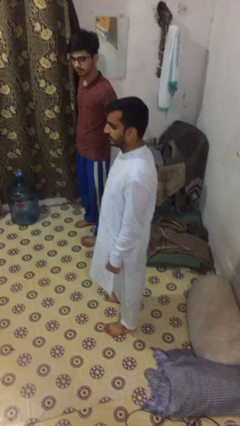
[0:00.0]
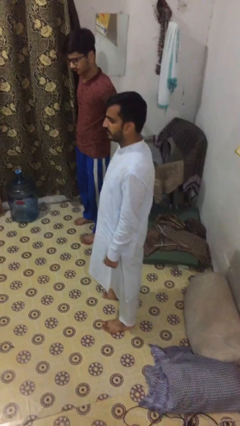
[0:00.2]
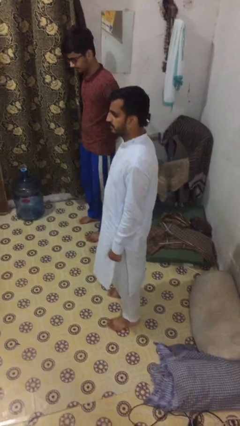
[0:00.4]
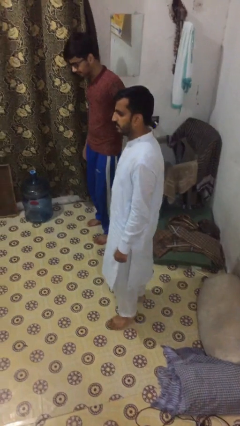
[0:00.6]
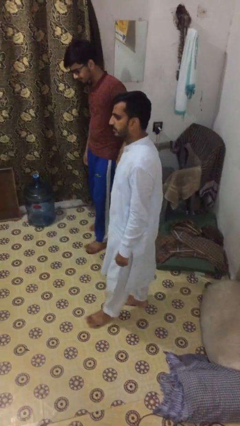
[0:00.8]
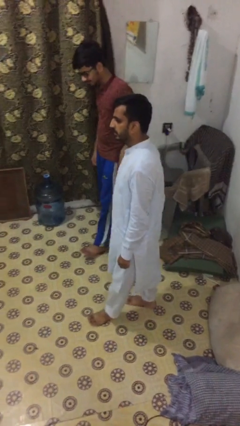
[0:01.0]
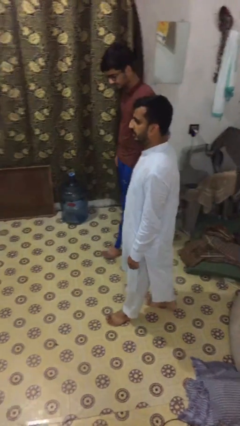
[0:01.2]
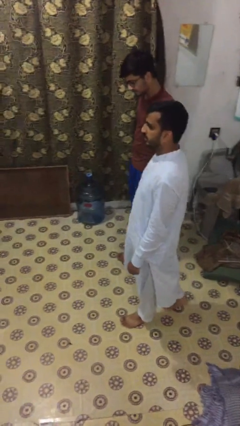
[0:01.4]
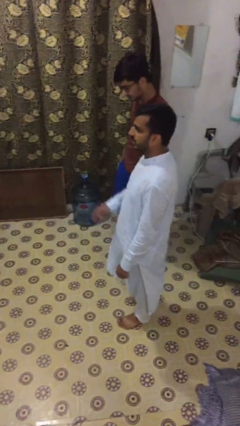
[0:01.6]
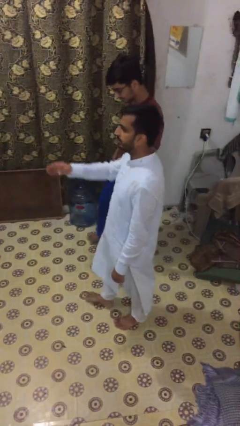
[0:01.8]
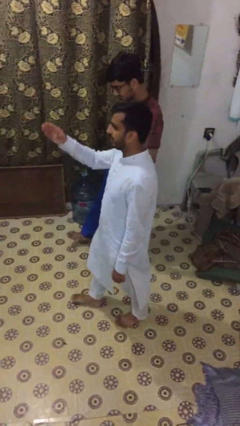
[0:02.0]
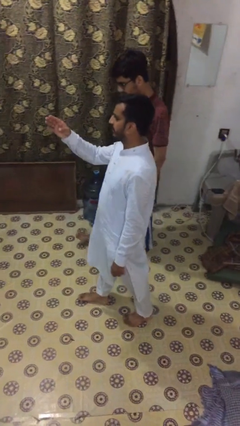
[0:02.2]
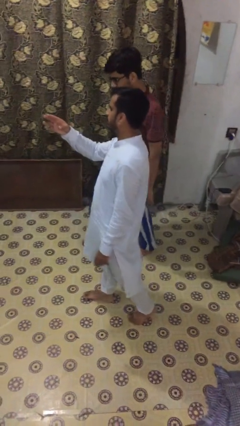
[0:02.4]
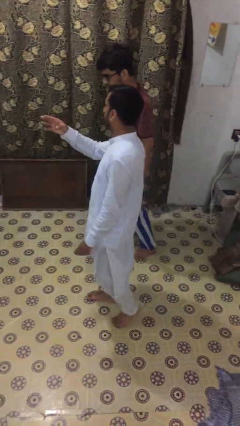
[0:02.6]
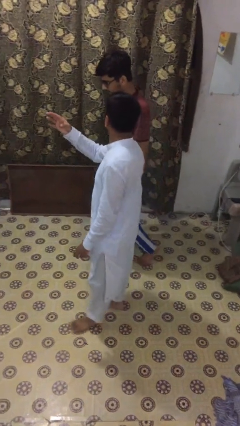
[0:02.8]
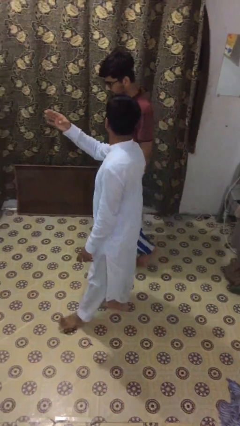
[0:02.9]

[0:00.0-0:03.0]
person talks to person

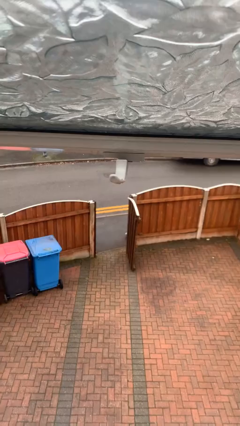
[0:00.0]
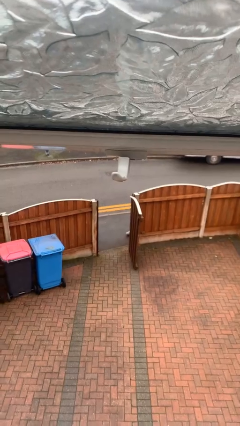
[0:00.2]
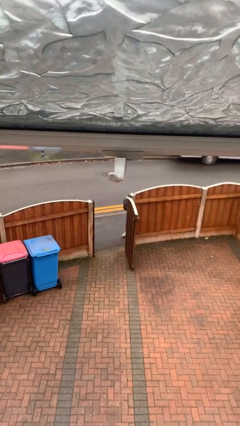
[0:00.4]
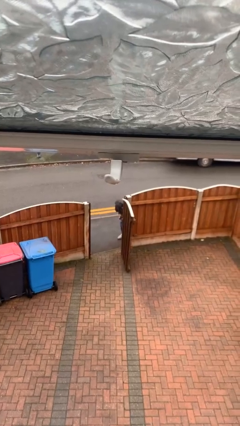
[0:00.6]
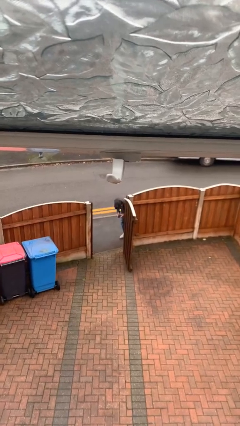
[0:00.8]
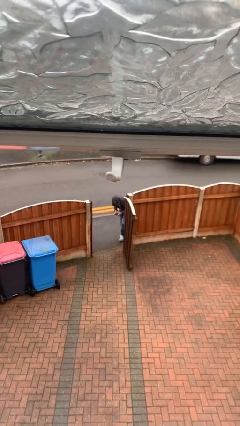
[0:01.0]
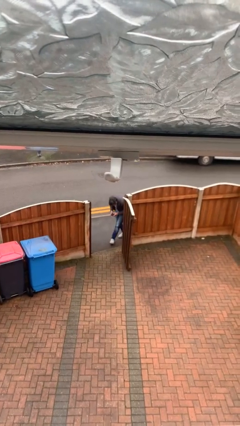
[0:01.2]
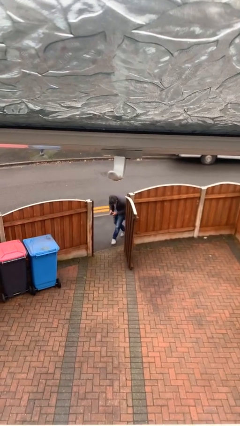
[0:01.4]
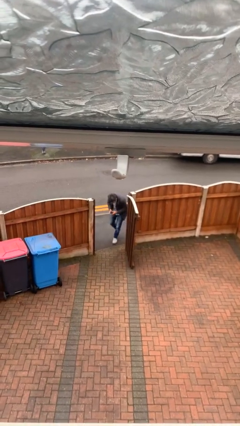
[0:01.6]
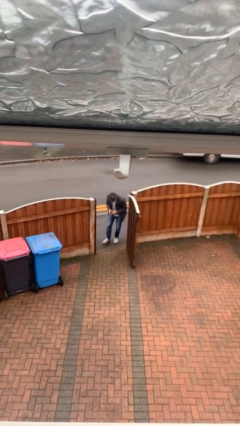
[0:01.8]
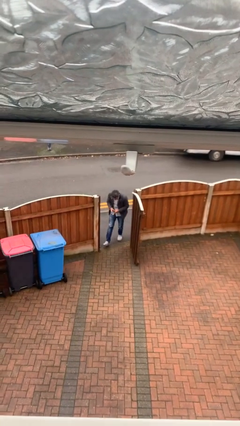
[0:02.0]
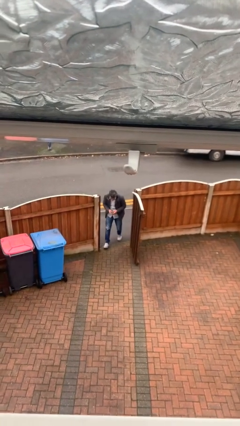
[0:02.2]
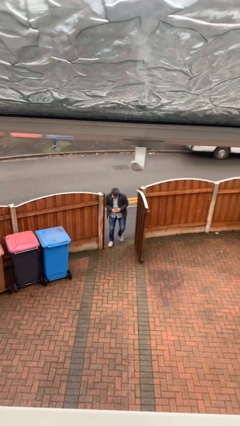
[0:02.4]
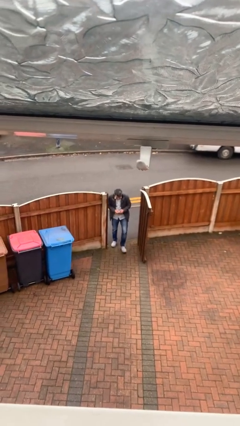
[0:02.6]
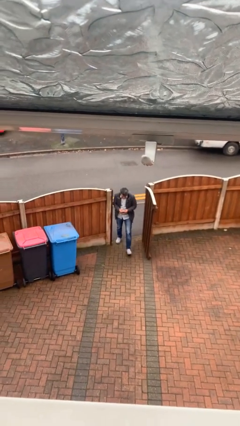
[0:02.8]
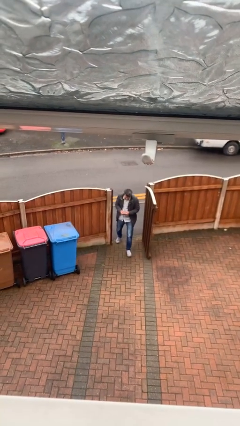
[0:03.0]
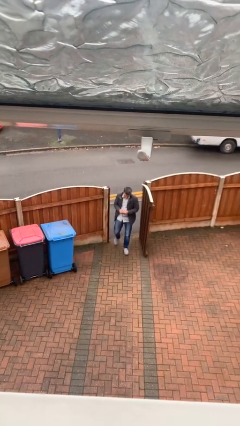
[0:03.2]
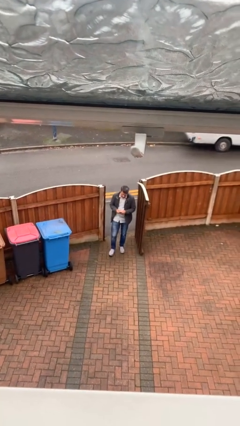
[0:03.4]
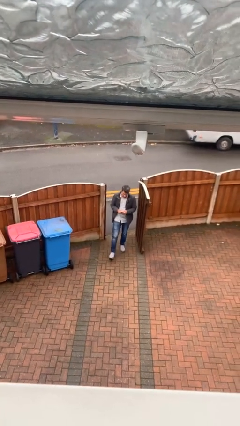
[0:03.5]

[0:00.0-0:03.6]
person enters scene through structure

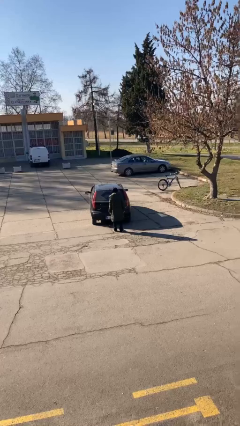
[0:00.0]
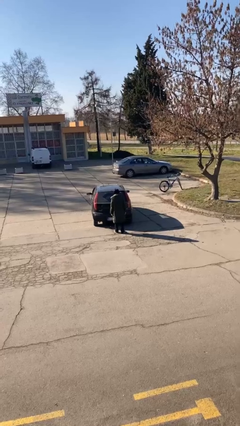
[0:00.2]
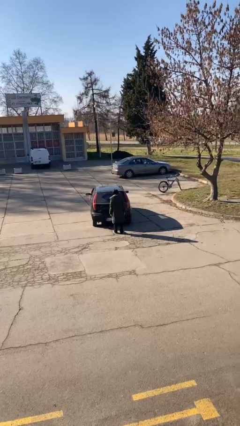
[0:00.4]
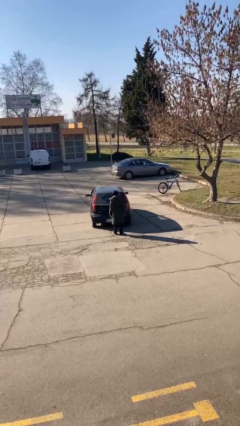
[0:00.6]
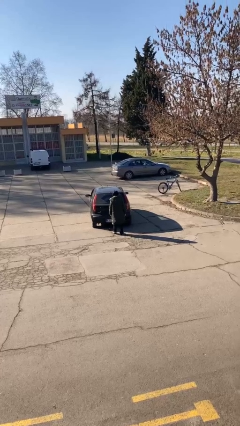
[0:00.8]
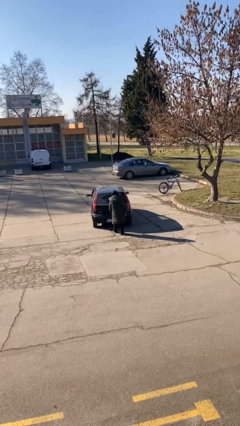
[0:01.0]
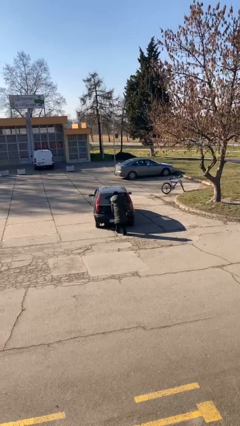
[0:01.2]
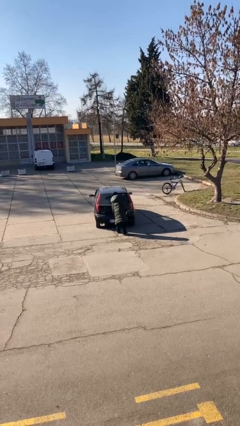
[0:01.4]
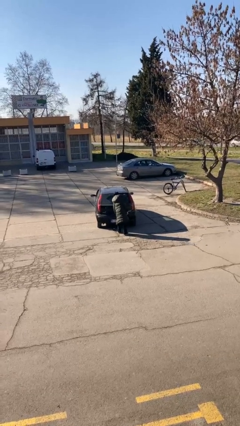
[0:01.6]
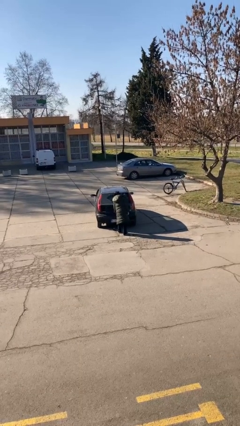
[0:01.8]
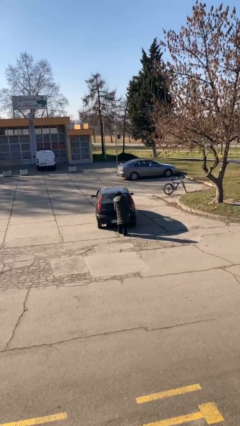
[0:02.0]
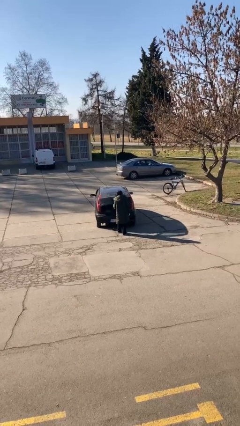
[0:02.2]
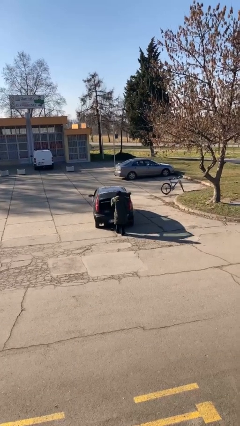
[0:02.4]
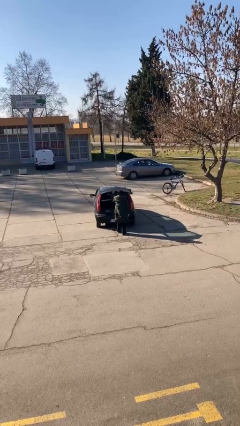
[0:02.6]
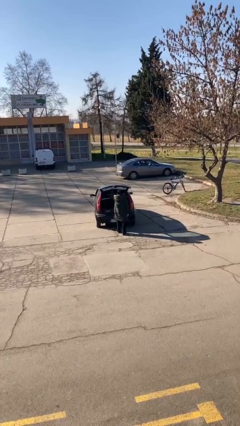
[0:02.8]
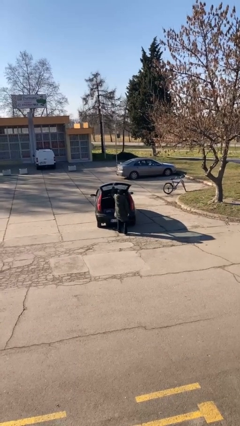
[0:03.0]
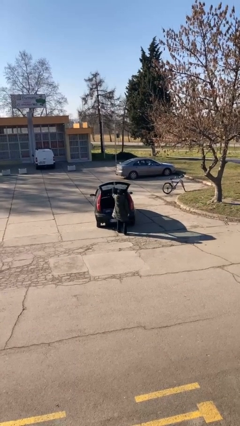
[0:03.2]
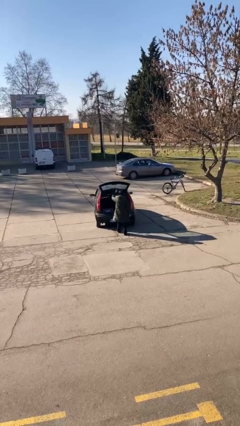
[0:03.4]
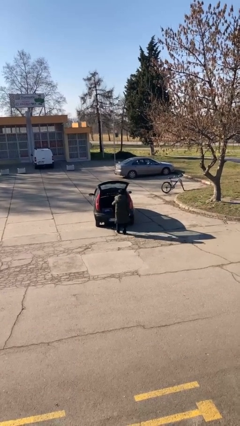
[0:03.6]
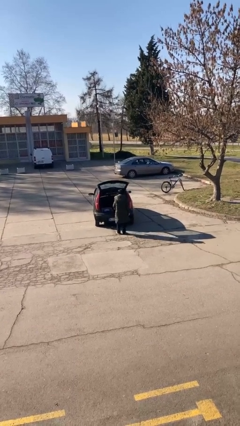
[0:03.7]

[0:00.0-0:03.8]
person opens car trunk

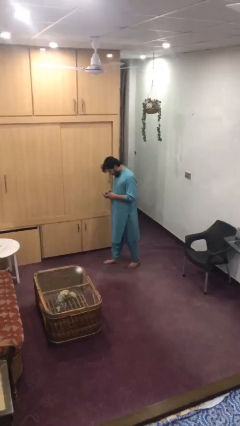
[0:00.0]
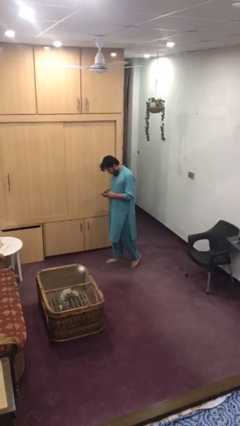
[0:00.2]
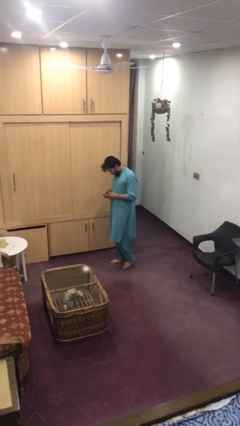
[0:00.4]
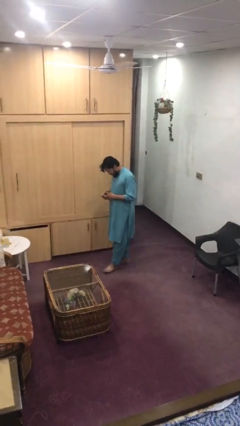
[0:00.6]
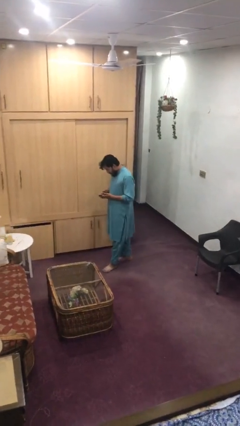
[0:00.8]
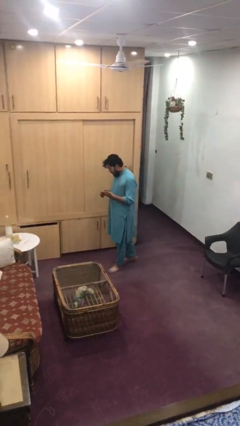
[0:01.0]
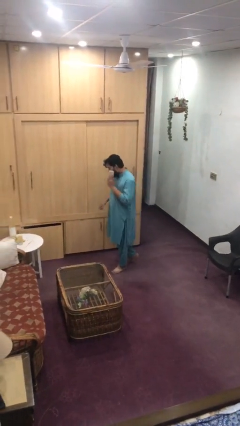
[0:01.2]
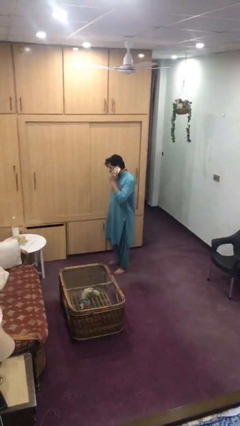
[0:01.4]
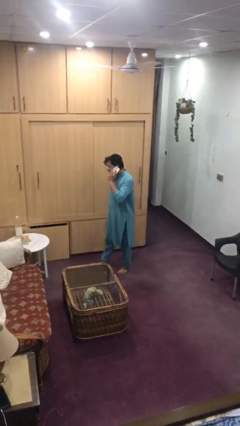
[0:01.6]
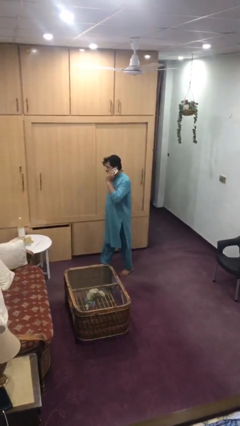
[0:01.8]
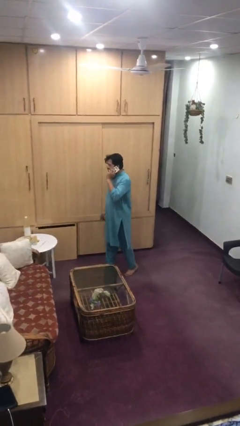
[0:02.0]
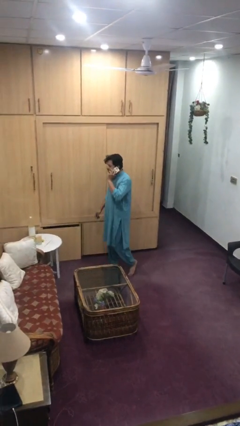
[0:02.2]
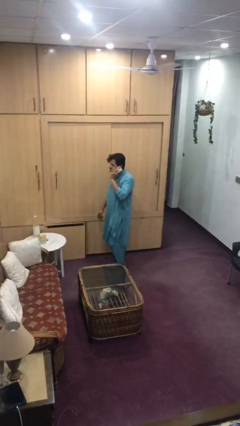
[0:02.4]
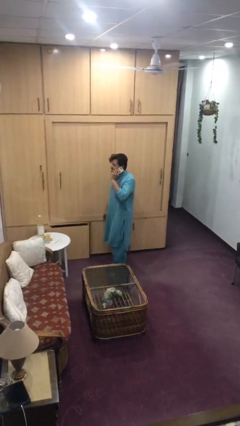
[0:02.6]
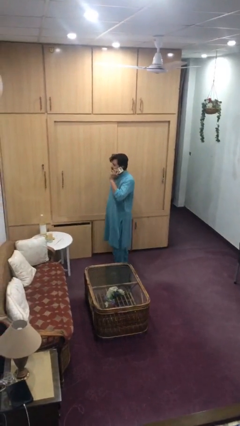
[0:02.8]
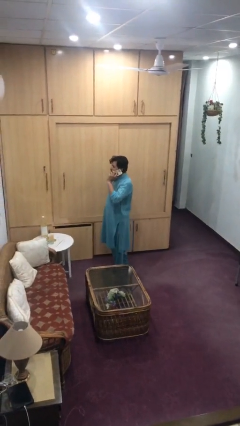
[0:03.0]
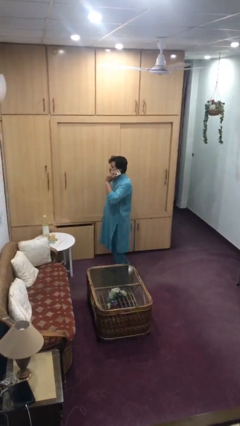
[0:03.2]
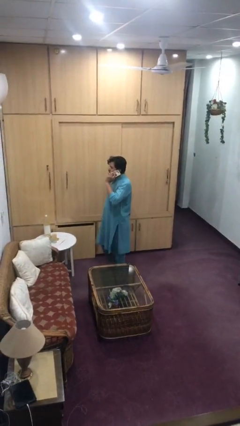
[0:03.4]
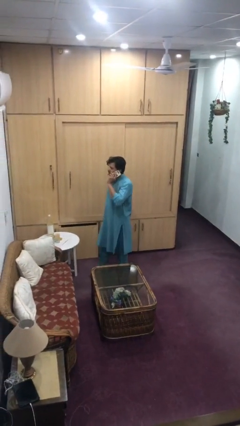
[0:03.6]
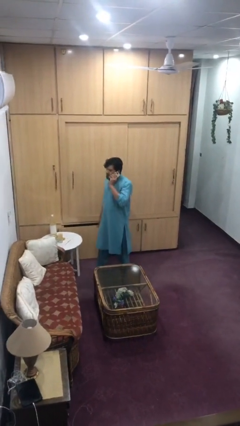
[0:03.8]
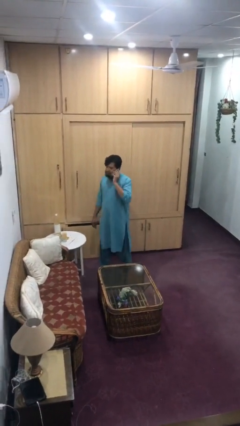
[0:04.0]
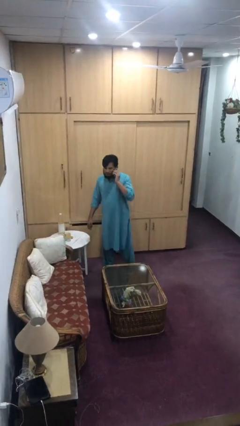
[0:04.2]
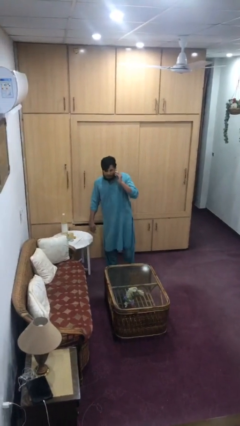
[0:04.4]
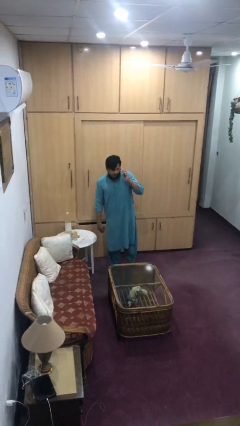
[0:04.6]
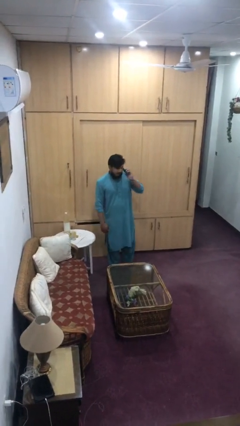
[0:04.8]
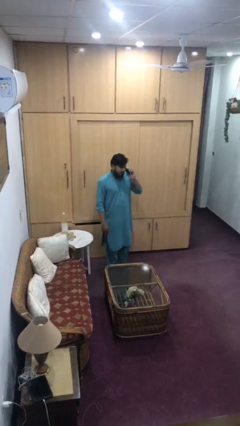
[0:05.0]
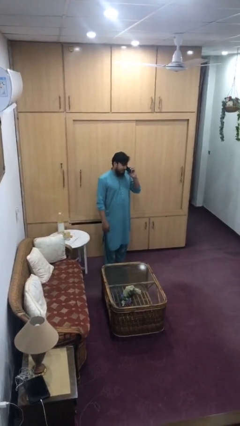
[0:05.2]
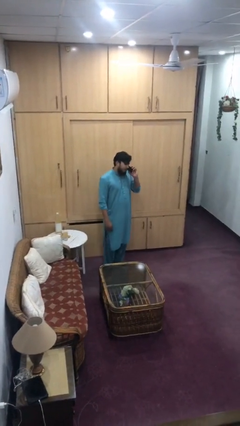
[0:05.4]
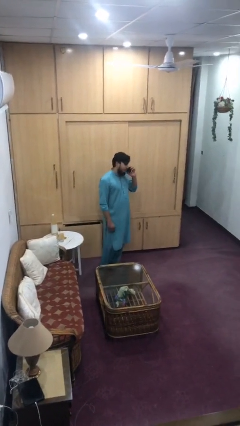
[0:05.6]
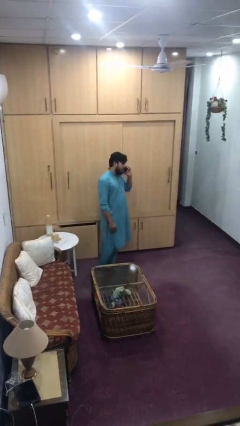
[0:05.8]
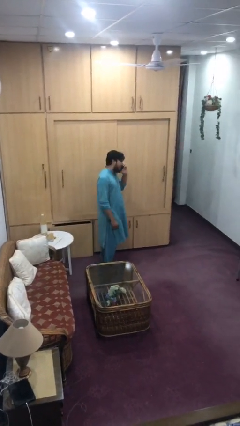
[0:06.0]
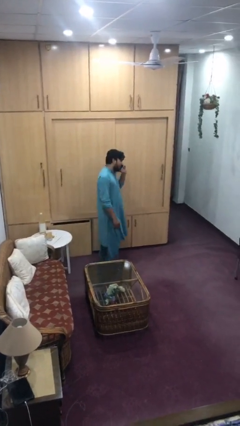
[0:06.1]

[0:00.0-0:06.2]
person talks on phone

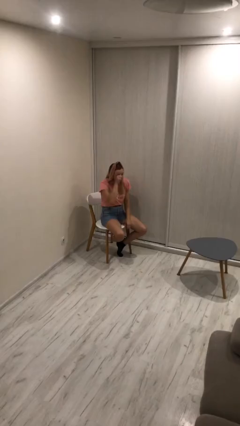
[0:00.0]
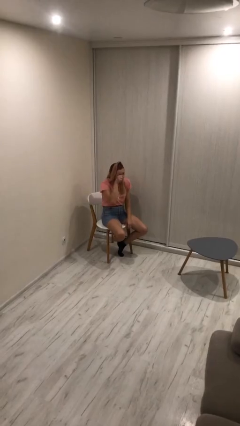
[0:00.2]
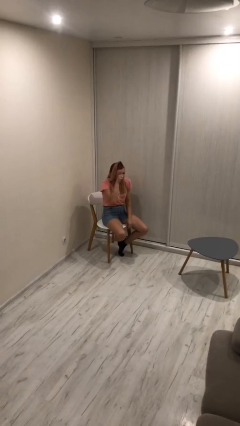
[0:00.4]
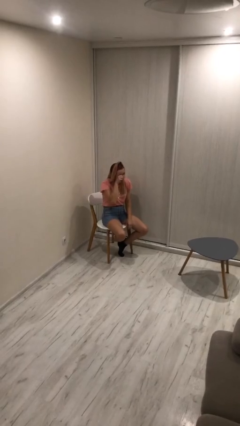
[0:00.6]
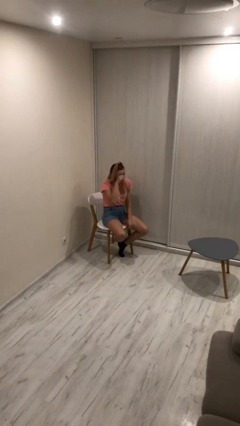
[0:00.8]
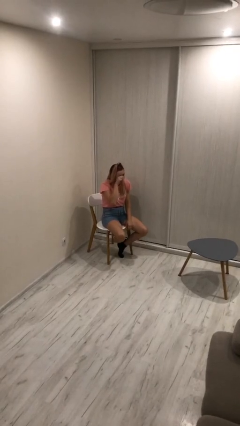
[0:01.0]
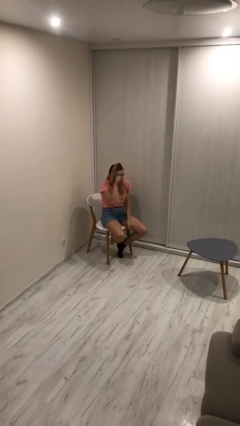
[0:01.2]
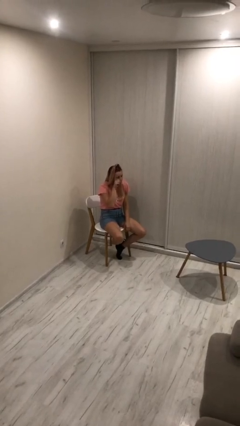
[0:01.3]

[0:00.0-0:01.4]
person rubs eyes
